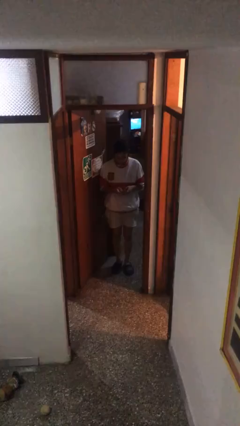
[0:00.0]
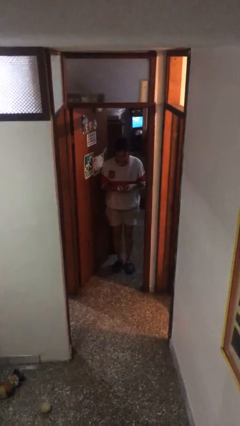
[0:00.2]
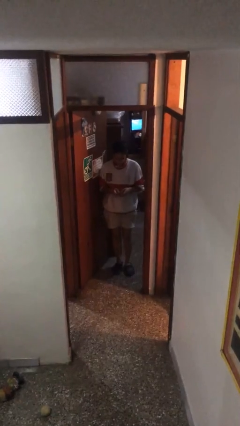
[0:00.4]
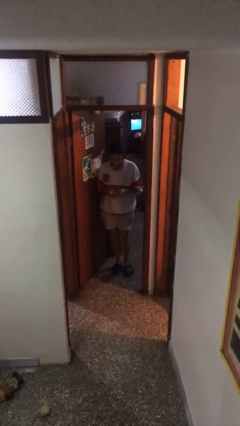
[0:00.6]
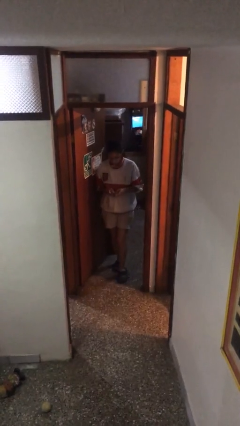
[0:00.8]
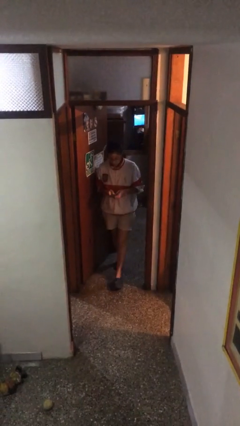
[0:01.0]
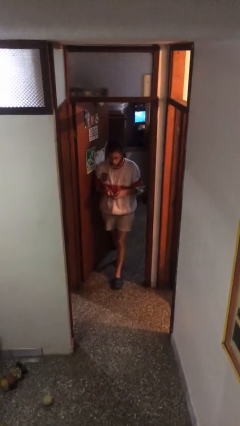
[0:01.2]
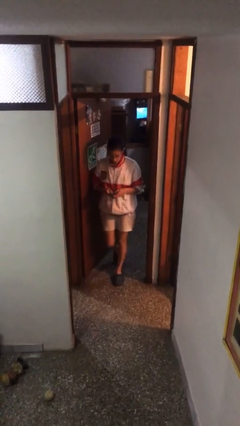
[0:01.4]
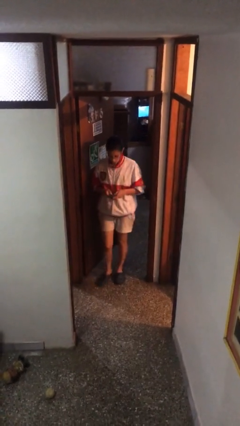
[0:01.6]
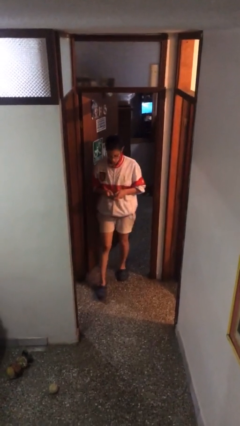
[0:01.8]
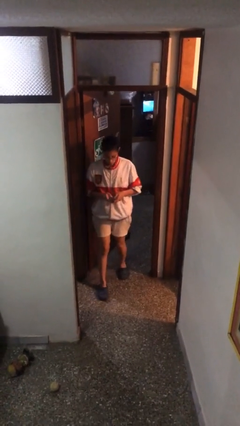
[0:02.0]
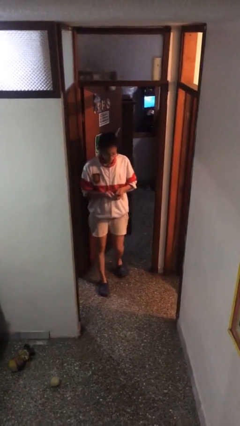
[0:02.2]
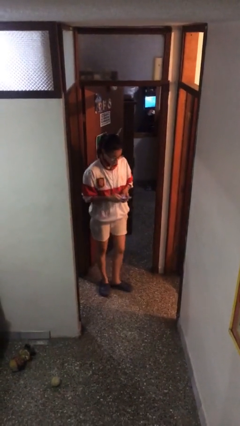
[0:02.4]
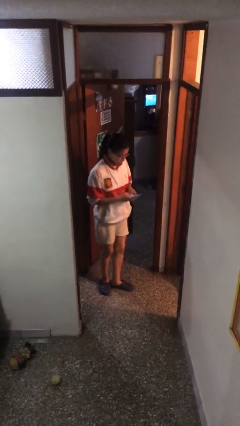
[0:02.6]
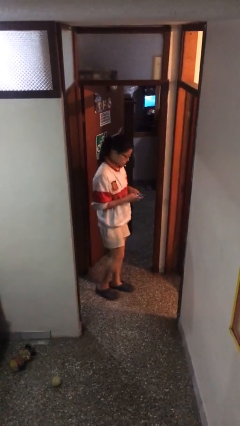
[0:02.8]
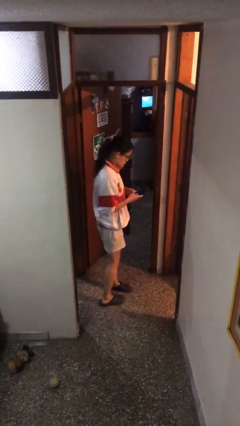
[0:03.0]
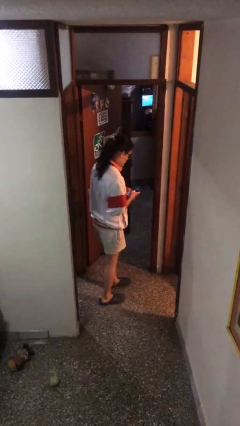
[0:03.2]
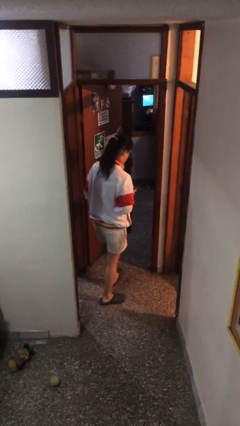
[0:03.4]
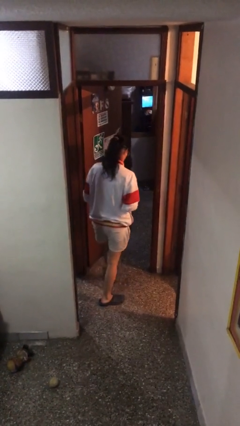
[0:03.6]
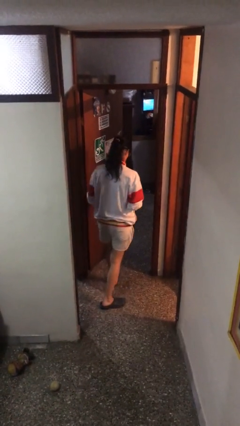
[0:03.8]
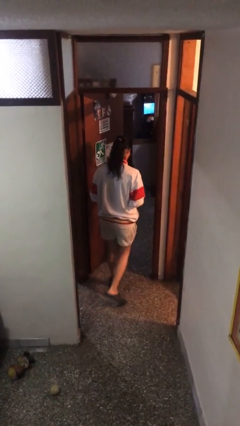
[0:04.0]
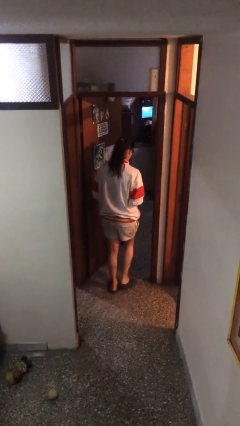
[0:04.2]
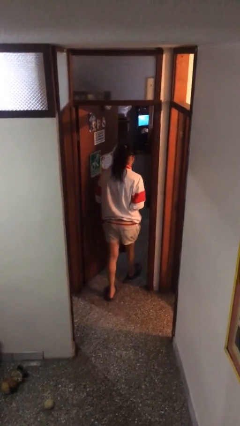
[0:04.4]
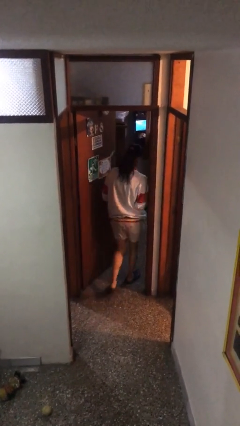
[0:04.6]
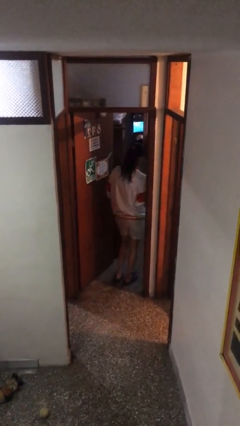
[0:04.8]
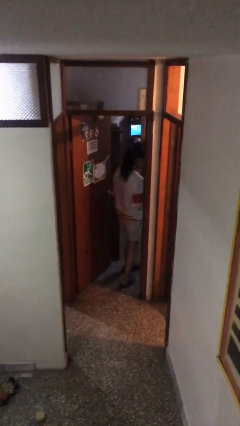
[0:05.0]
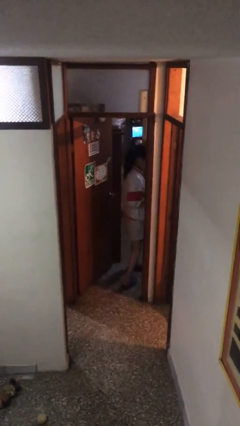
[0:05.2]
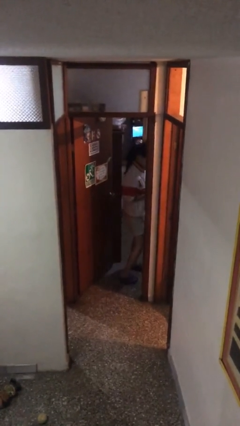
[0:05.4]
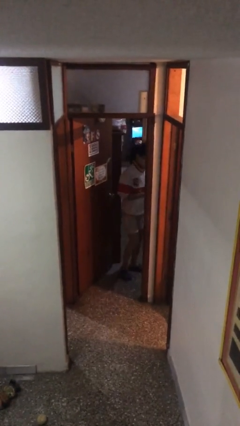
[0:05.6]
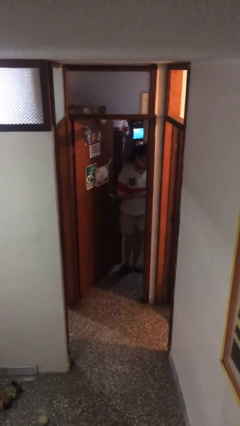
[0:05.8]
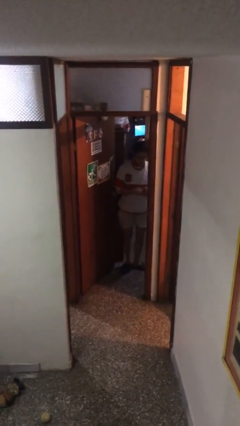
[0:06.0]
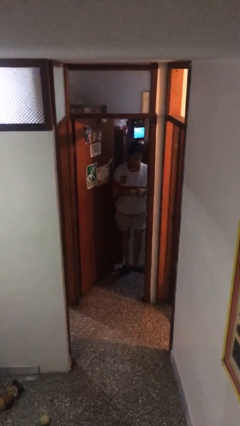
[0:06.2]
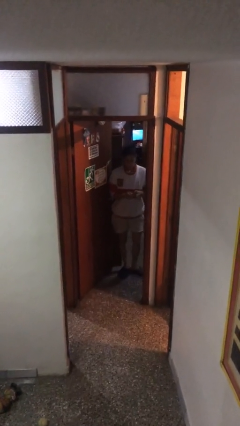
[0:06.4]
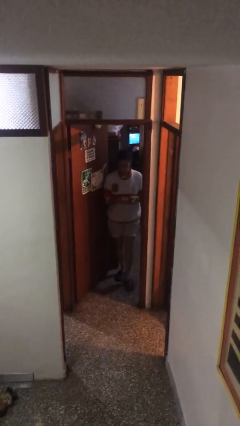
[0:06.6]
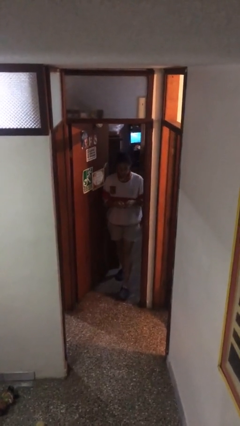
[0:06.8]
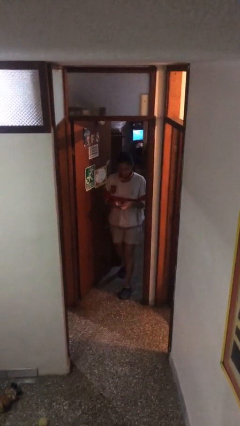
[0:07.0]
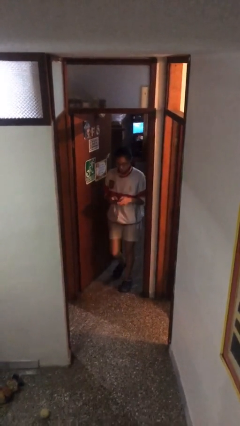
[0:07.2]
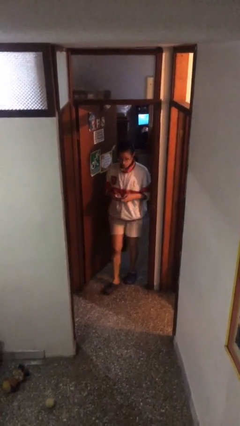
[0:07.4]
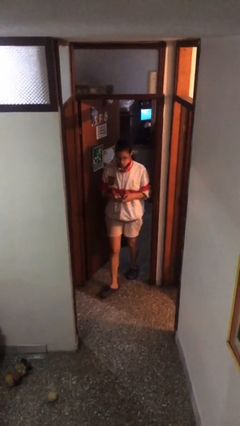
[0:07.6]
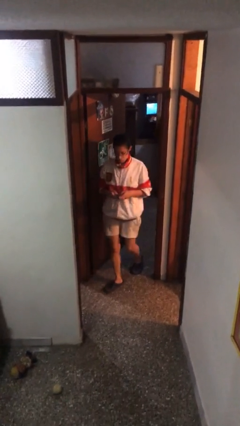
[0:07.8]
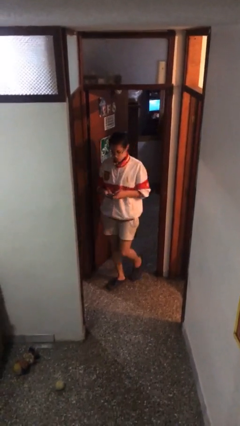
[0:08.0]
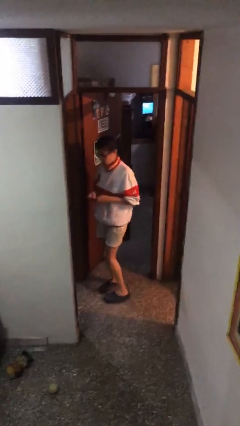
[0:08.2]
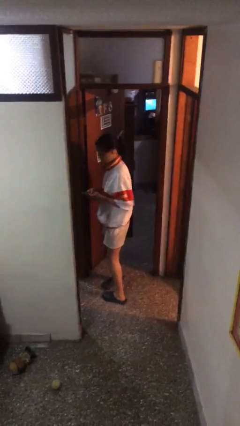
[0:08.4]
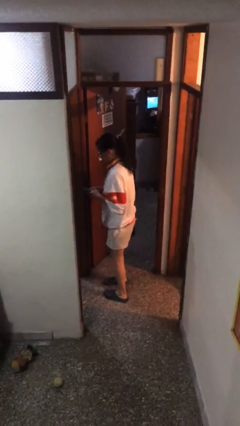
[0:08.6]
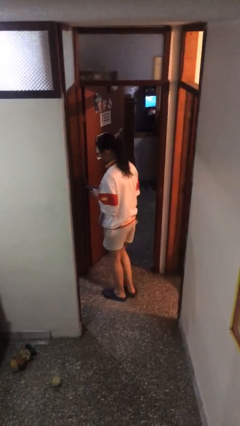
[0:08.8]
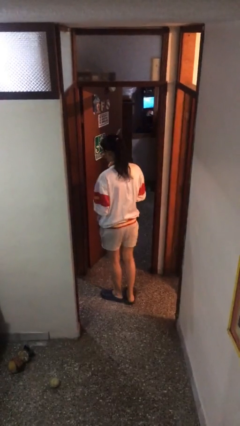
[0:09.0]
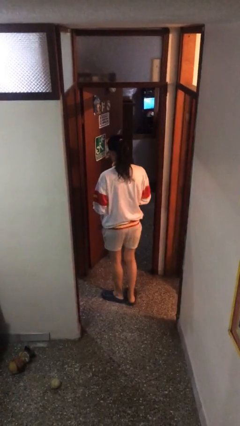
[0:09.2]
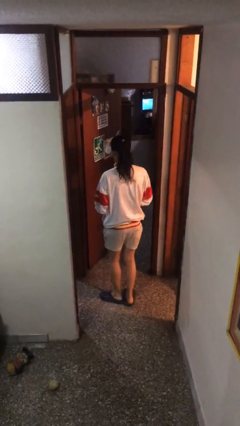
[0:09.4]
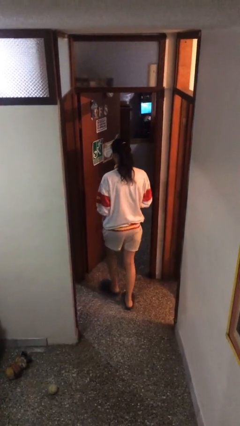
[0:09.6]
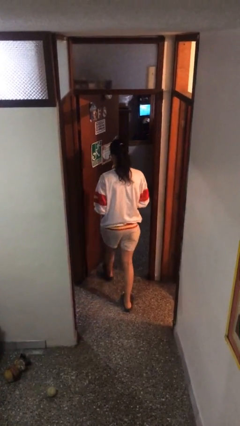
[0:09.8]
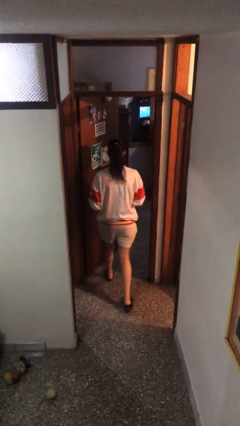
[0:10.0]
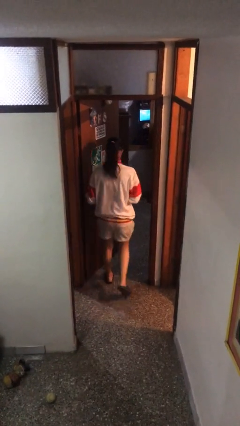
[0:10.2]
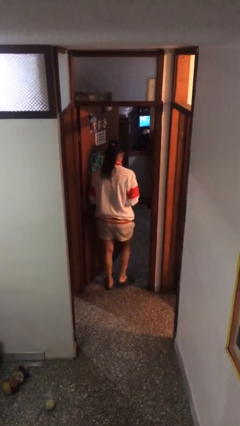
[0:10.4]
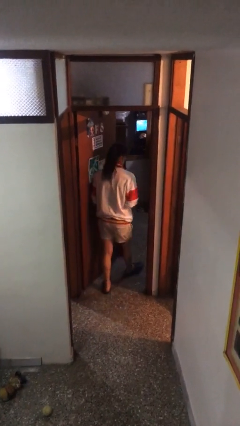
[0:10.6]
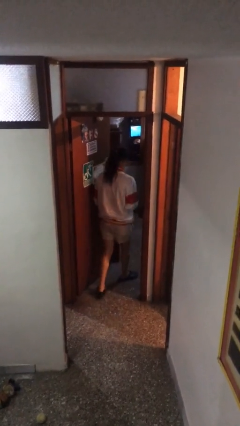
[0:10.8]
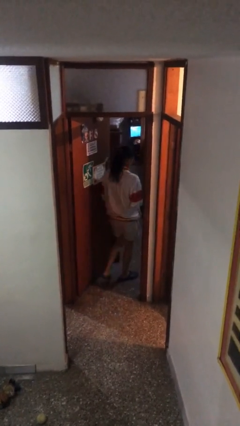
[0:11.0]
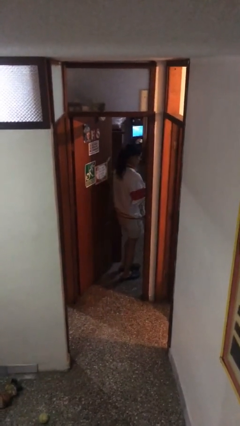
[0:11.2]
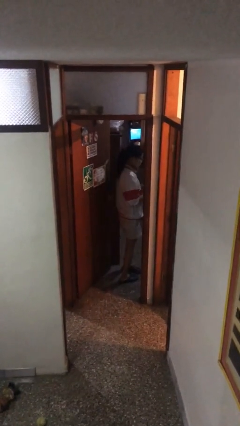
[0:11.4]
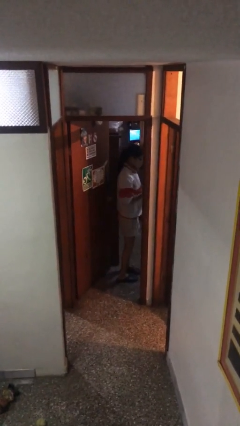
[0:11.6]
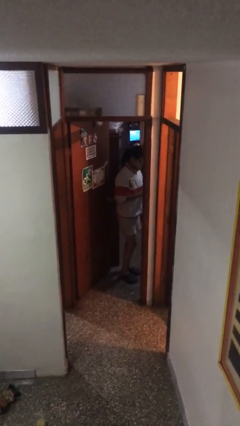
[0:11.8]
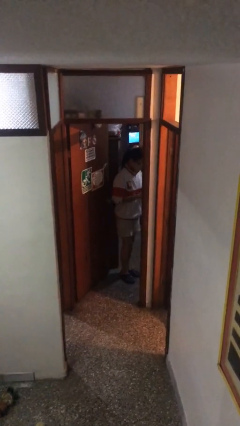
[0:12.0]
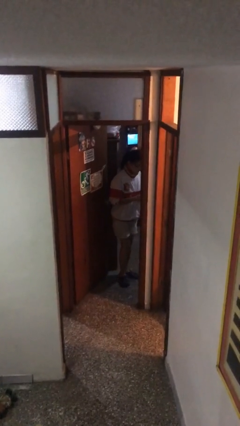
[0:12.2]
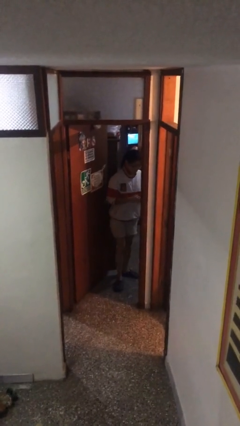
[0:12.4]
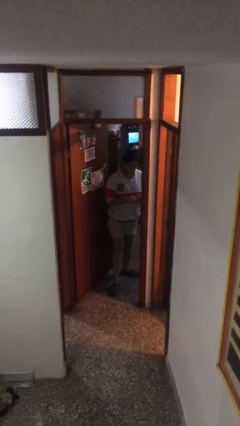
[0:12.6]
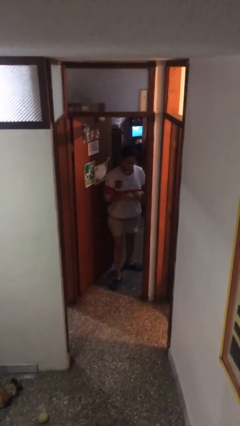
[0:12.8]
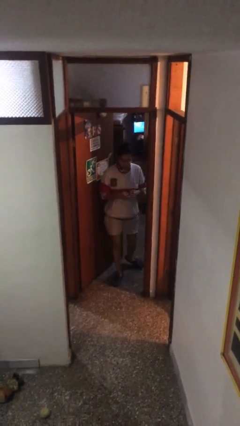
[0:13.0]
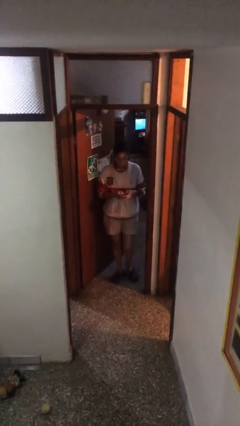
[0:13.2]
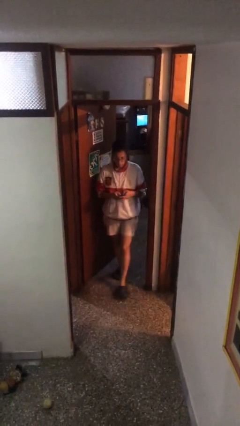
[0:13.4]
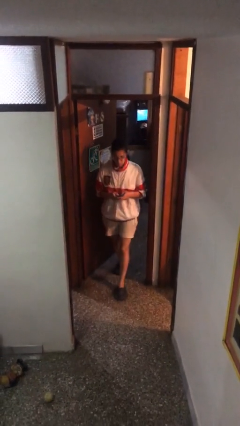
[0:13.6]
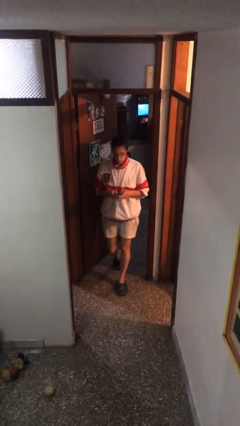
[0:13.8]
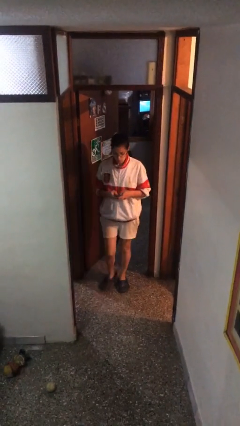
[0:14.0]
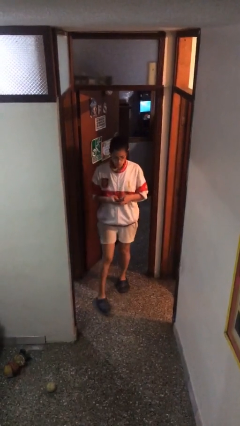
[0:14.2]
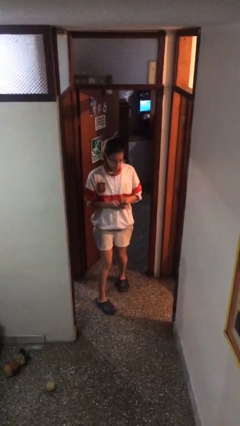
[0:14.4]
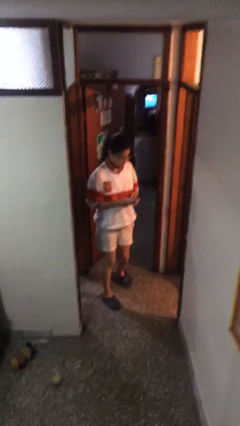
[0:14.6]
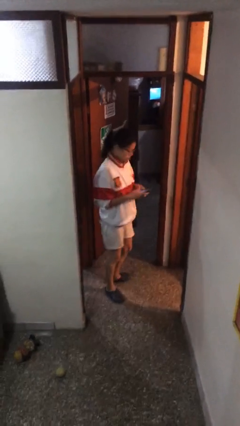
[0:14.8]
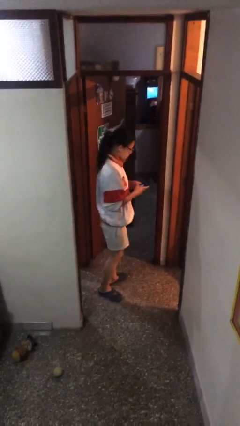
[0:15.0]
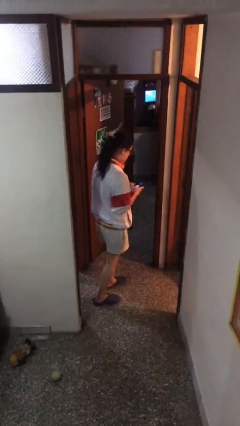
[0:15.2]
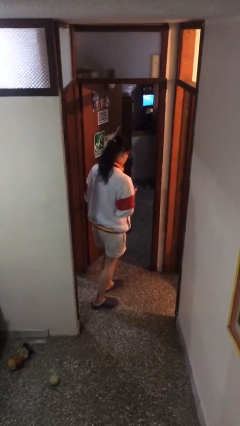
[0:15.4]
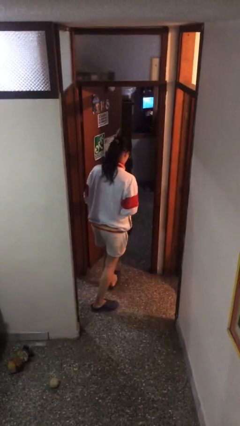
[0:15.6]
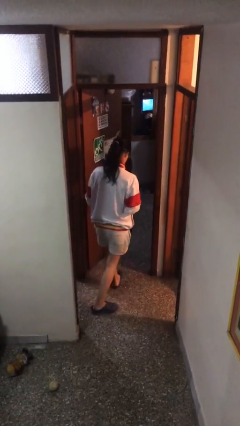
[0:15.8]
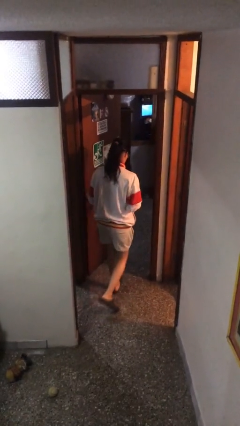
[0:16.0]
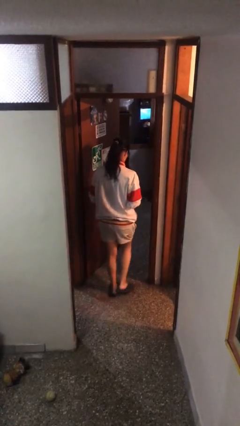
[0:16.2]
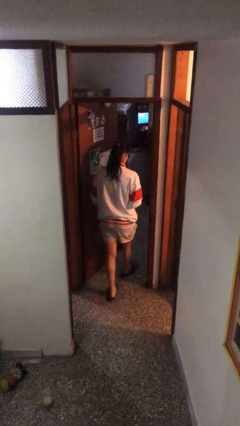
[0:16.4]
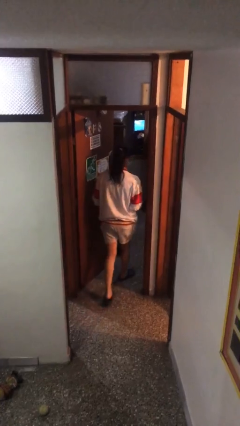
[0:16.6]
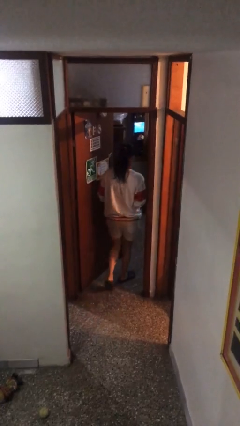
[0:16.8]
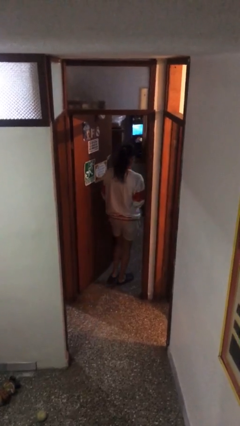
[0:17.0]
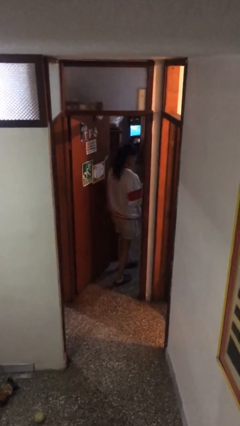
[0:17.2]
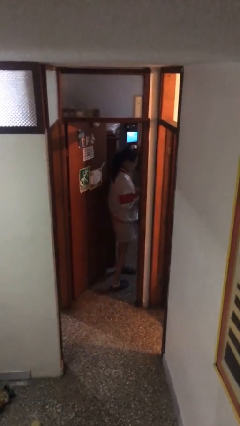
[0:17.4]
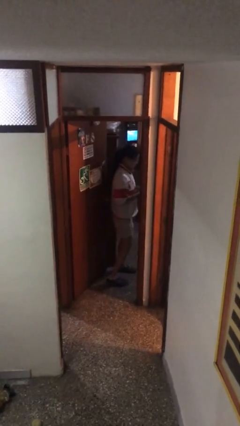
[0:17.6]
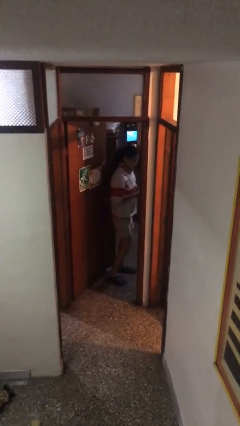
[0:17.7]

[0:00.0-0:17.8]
person texts on phone

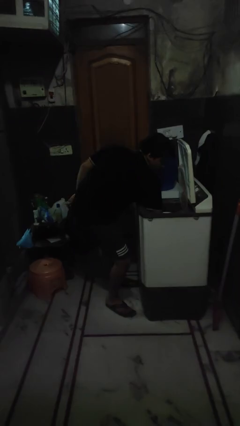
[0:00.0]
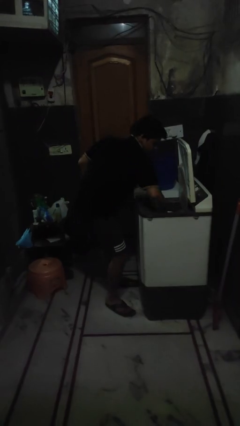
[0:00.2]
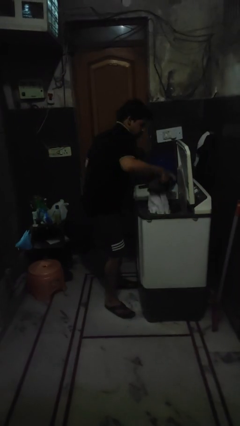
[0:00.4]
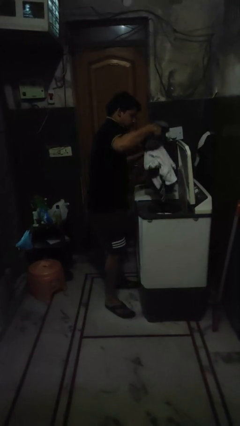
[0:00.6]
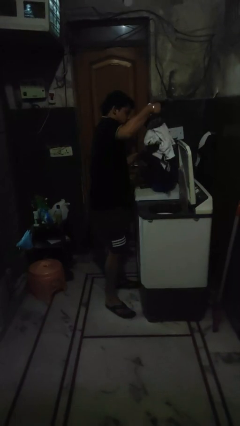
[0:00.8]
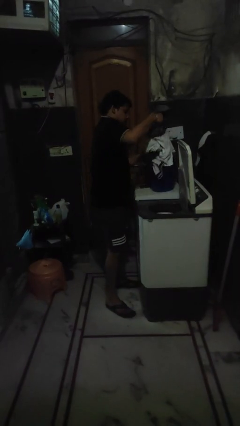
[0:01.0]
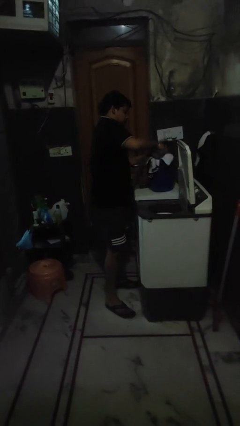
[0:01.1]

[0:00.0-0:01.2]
person unloads clotheswasher
